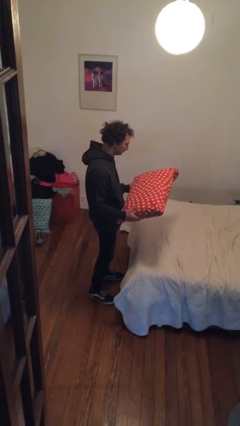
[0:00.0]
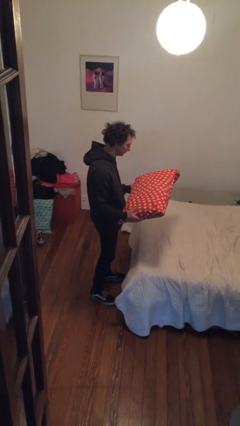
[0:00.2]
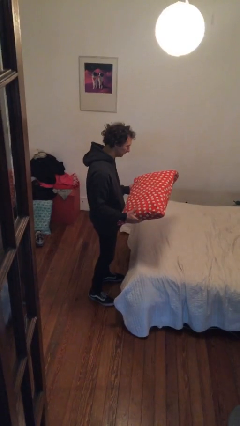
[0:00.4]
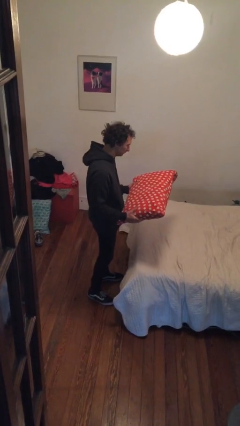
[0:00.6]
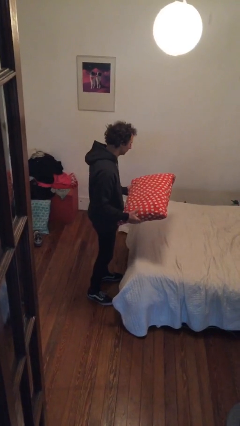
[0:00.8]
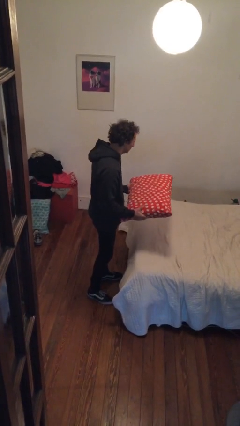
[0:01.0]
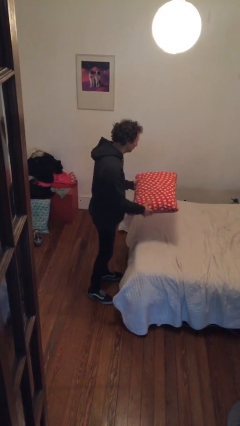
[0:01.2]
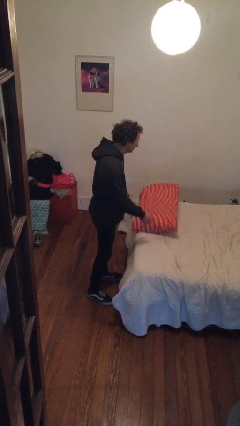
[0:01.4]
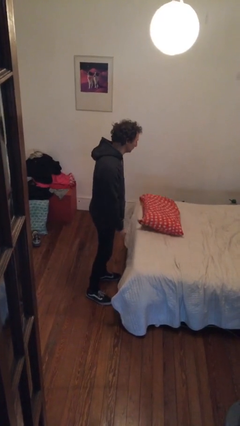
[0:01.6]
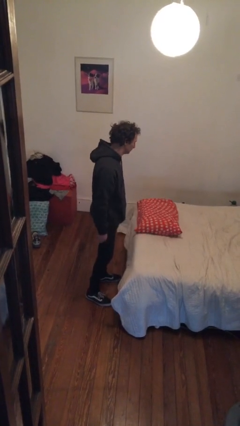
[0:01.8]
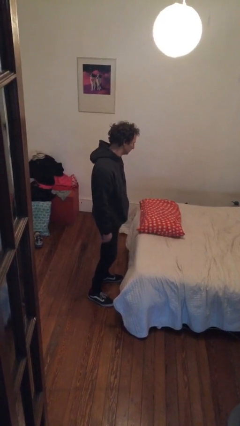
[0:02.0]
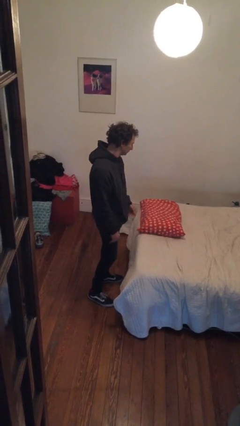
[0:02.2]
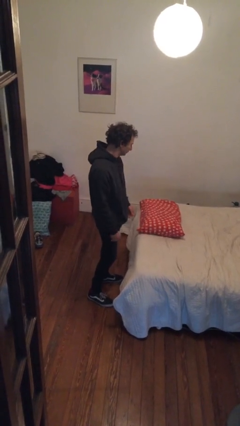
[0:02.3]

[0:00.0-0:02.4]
person puts down object on bed

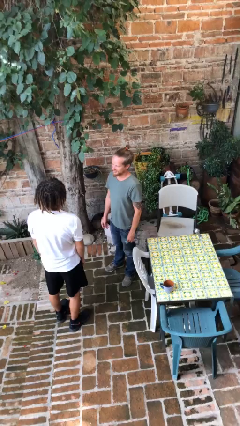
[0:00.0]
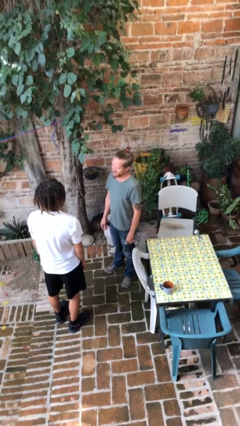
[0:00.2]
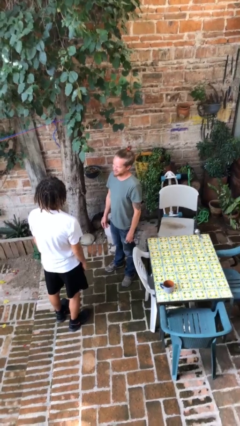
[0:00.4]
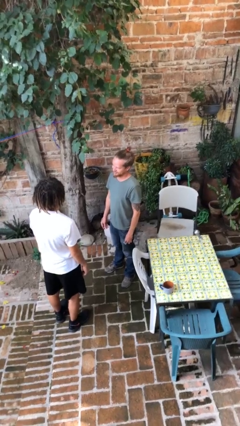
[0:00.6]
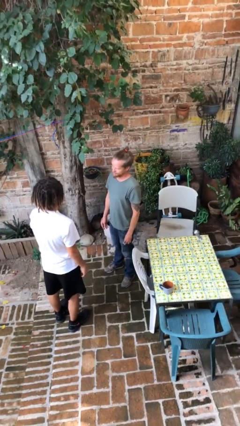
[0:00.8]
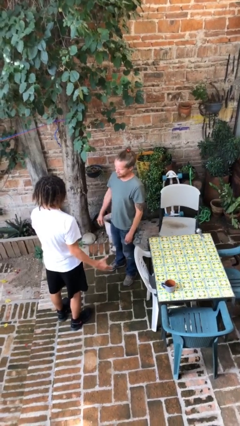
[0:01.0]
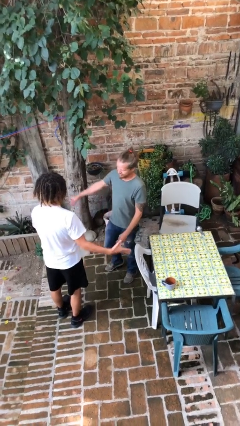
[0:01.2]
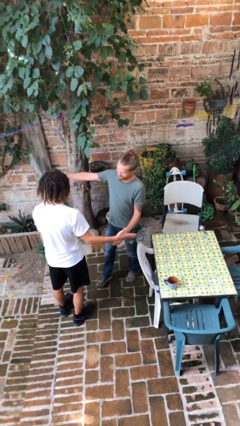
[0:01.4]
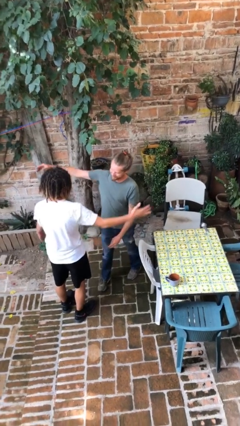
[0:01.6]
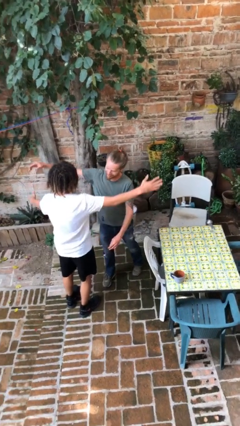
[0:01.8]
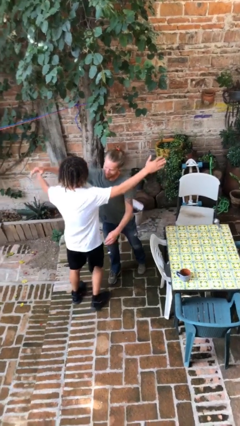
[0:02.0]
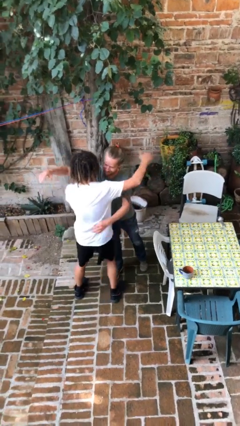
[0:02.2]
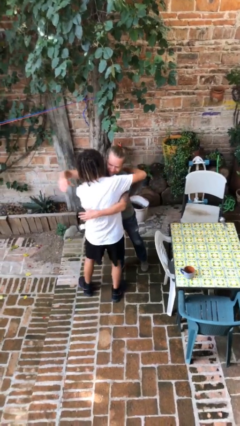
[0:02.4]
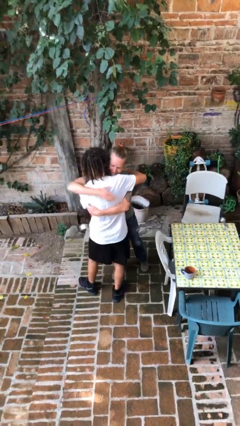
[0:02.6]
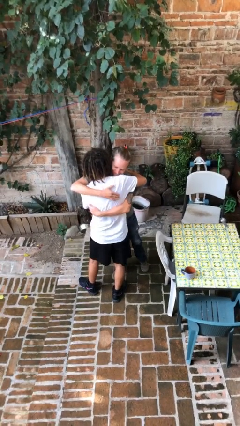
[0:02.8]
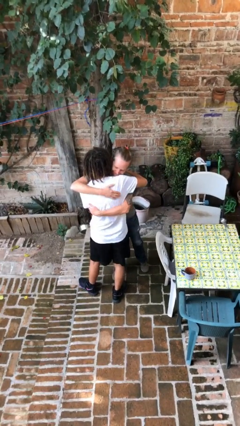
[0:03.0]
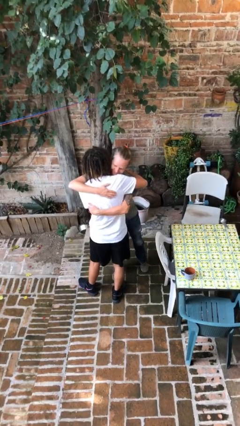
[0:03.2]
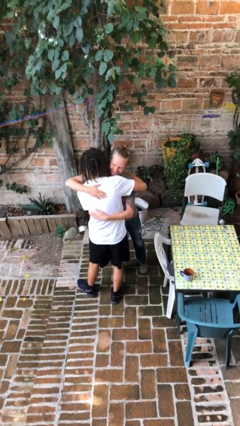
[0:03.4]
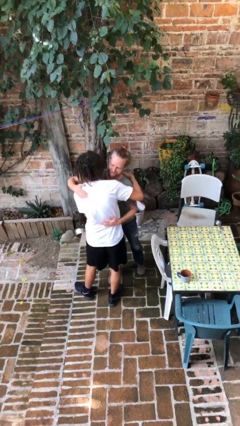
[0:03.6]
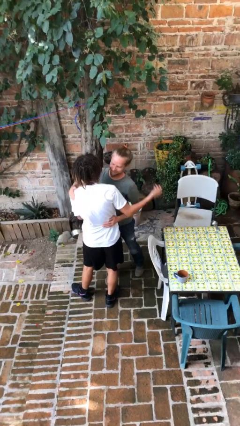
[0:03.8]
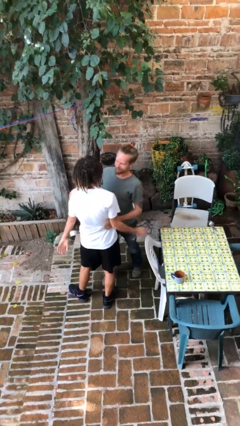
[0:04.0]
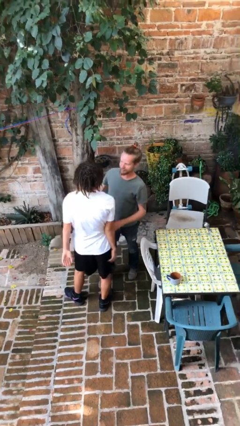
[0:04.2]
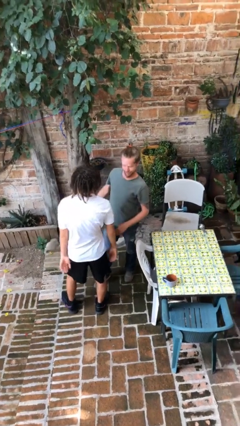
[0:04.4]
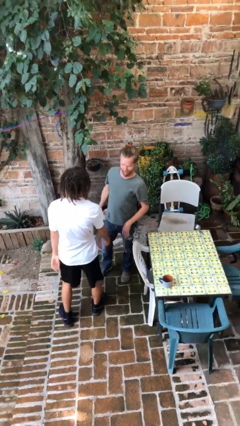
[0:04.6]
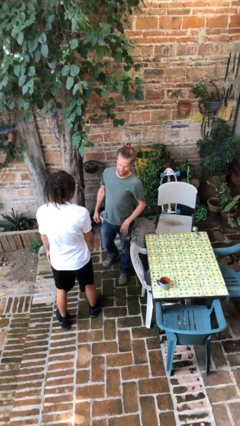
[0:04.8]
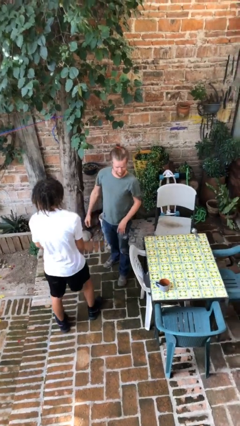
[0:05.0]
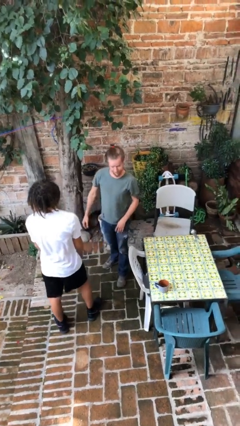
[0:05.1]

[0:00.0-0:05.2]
person embraces person

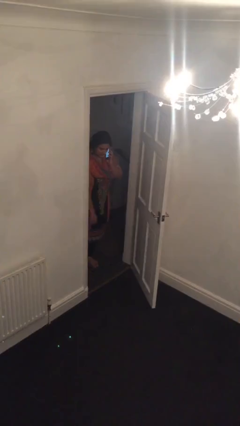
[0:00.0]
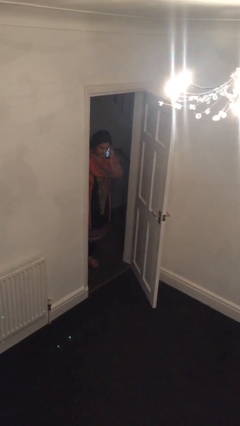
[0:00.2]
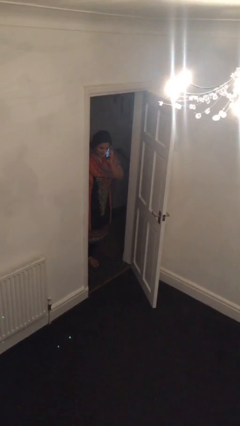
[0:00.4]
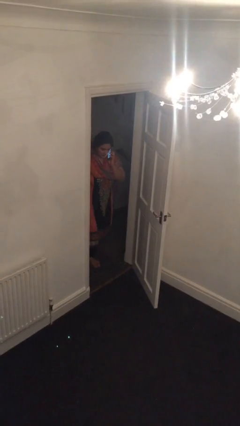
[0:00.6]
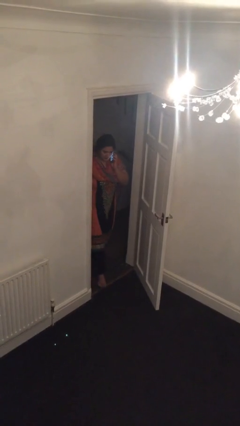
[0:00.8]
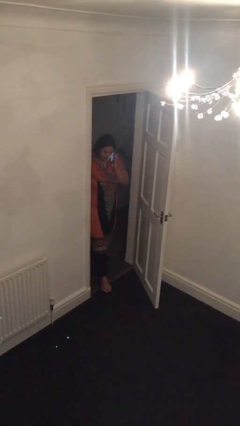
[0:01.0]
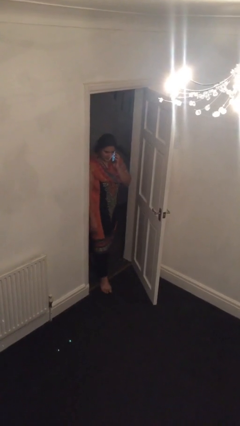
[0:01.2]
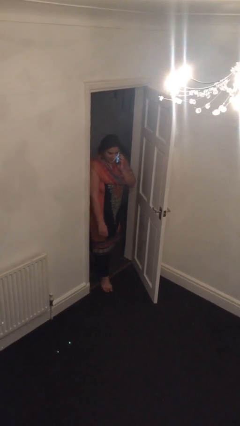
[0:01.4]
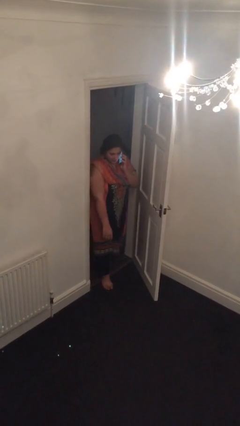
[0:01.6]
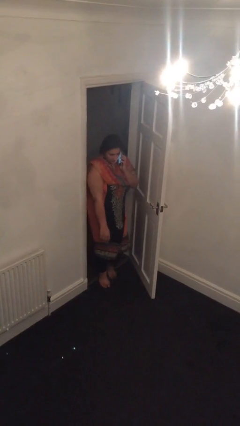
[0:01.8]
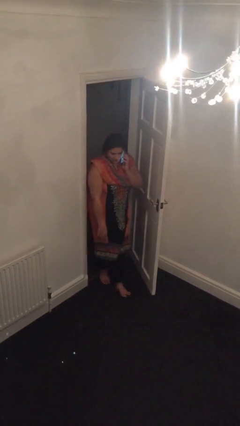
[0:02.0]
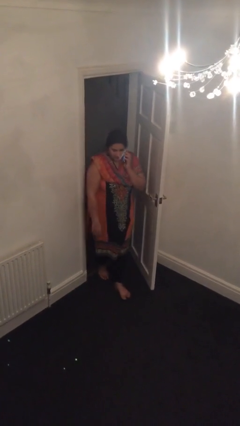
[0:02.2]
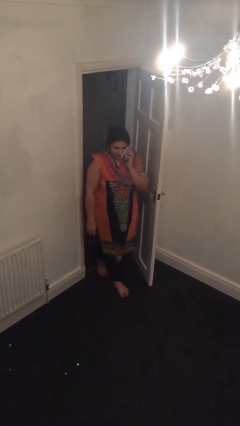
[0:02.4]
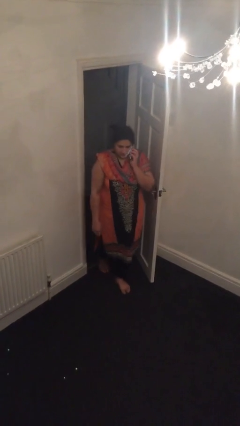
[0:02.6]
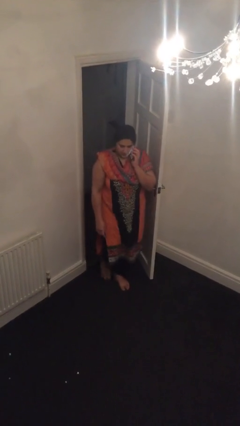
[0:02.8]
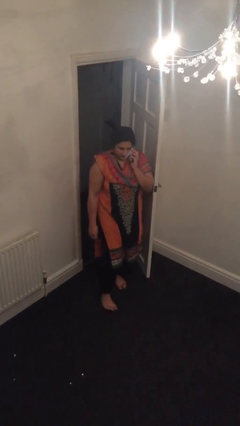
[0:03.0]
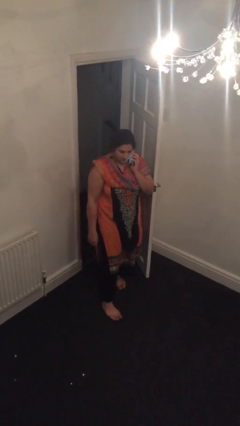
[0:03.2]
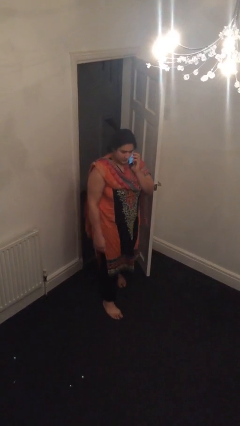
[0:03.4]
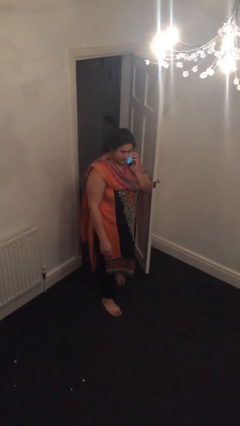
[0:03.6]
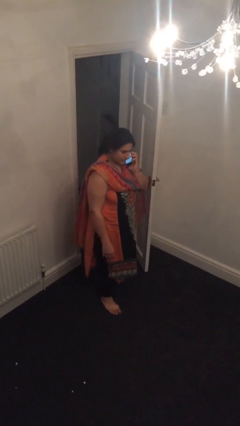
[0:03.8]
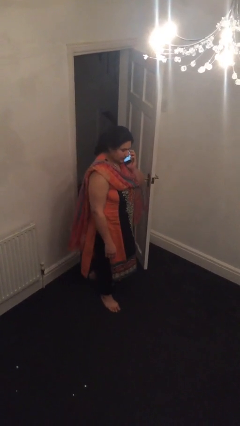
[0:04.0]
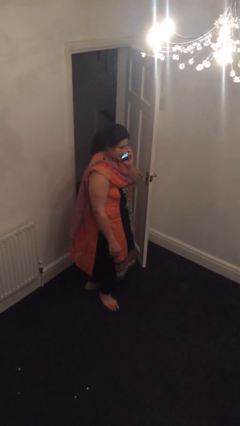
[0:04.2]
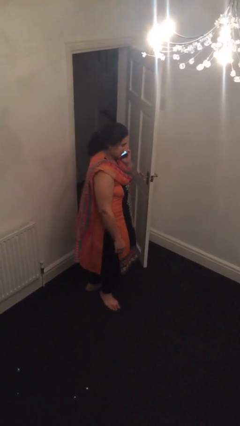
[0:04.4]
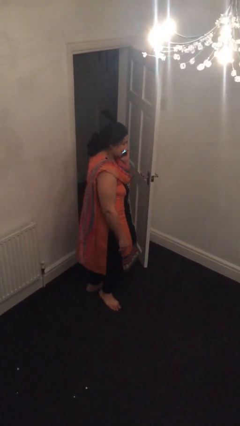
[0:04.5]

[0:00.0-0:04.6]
person enters scene through structure

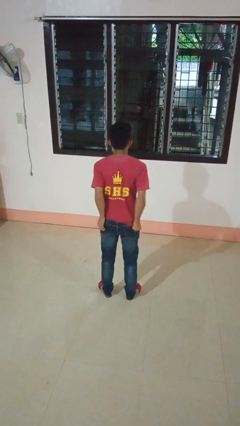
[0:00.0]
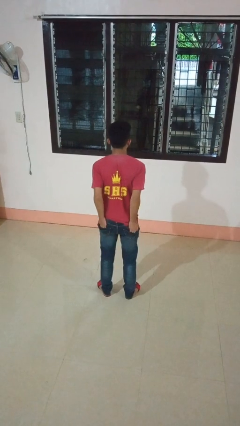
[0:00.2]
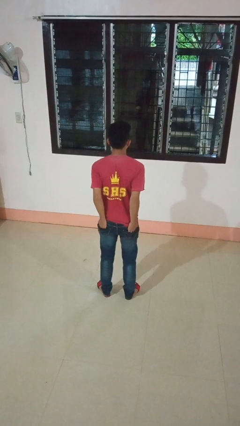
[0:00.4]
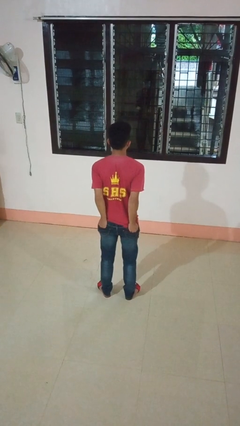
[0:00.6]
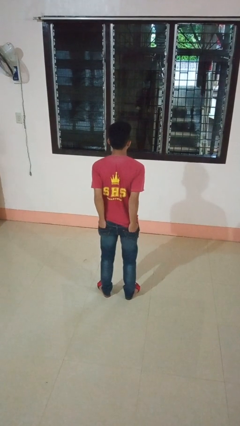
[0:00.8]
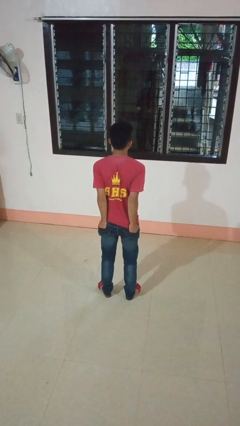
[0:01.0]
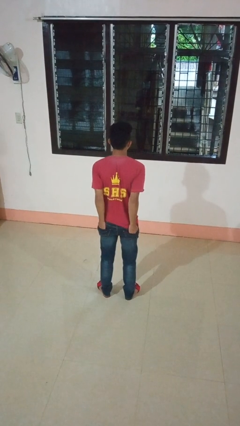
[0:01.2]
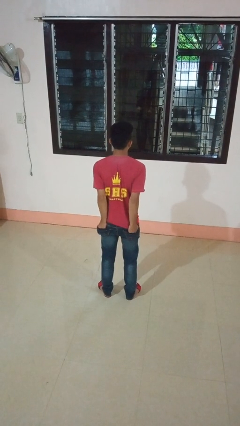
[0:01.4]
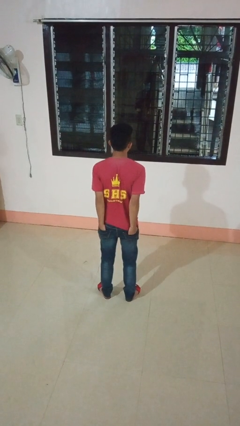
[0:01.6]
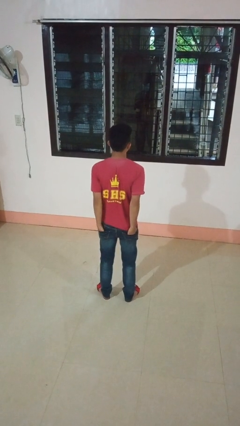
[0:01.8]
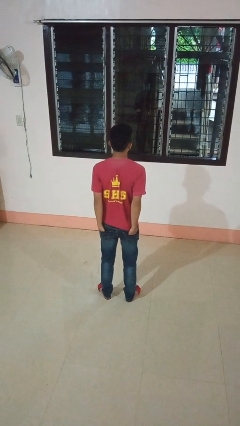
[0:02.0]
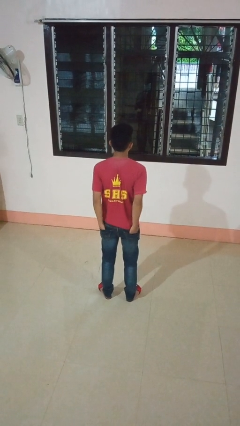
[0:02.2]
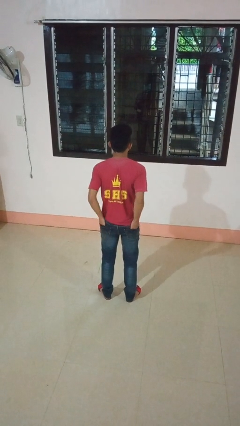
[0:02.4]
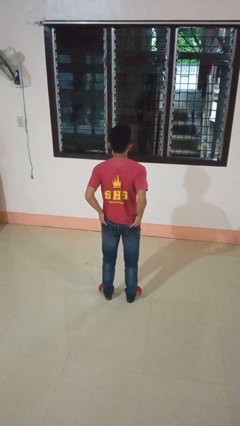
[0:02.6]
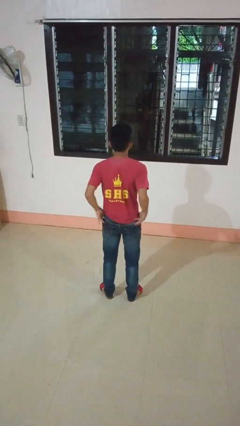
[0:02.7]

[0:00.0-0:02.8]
person puts hands in back pockets

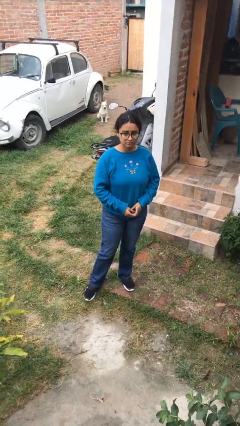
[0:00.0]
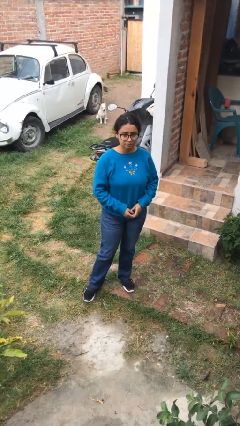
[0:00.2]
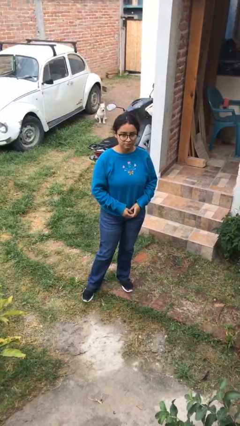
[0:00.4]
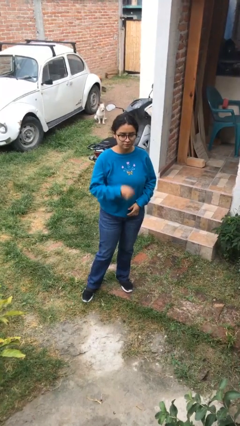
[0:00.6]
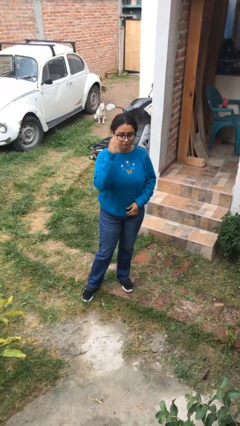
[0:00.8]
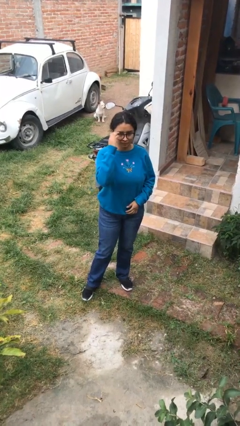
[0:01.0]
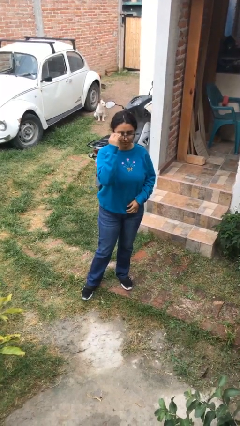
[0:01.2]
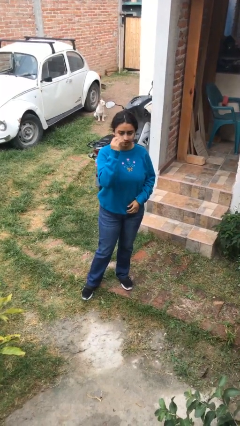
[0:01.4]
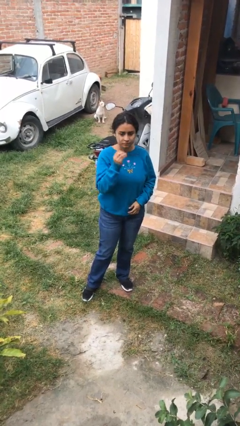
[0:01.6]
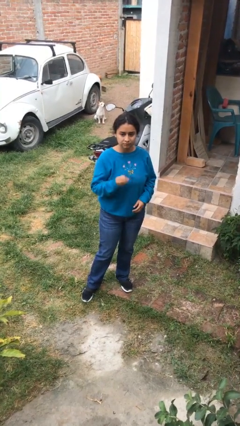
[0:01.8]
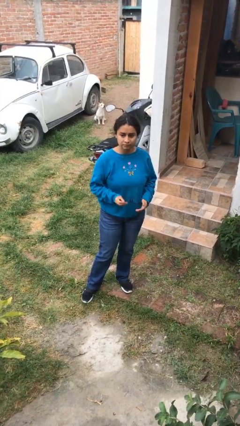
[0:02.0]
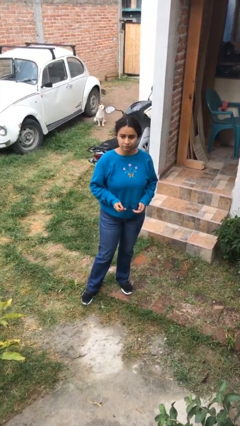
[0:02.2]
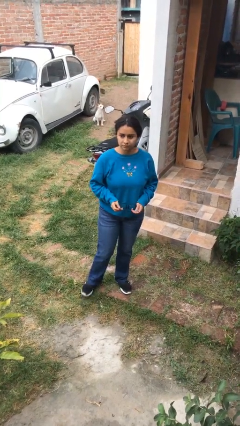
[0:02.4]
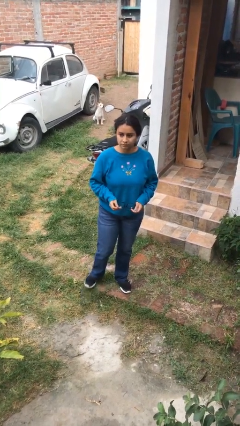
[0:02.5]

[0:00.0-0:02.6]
person takes off glasses
